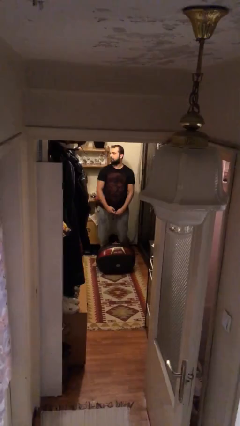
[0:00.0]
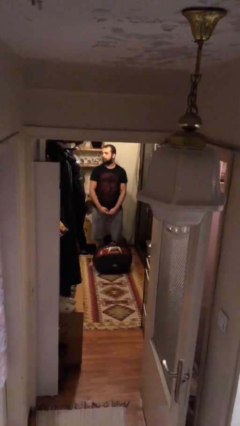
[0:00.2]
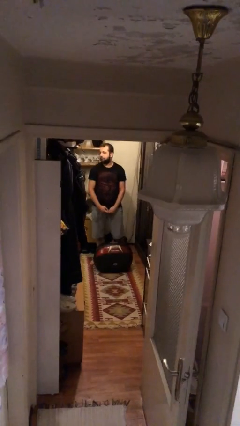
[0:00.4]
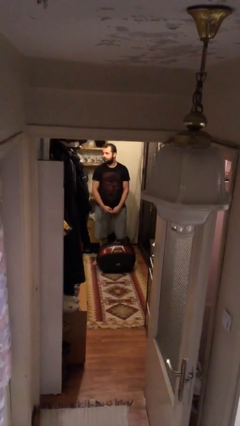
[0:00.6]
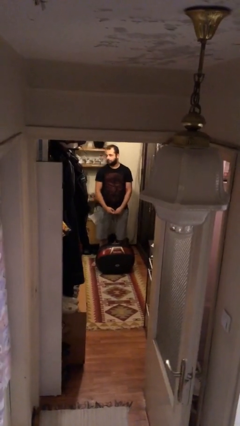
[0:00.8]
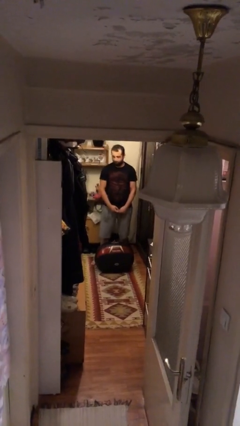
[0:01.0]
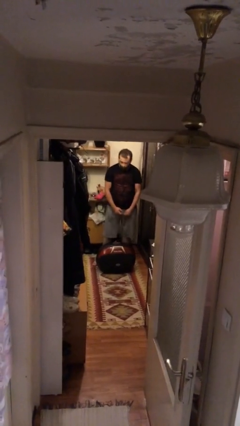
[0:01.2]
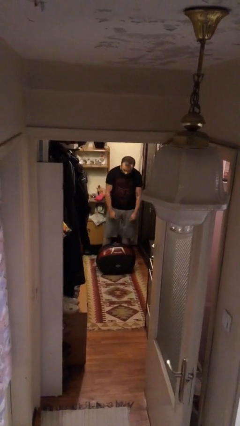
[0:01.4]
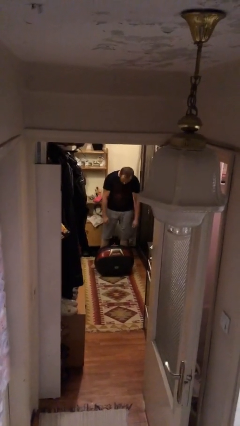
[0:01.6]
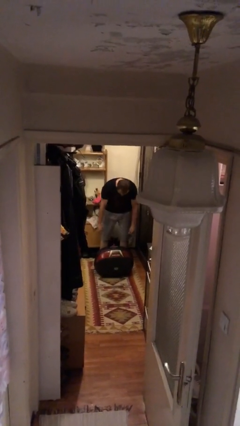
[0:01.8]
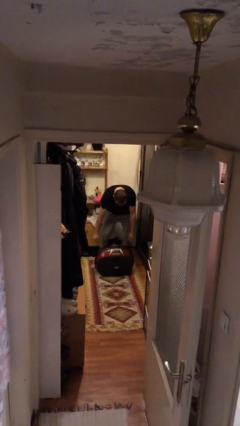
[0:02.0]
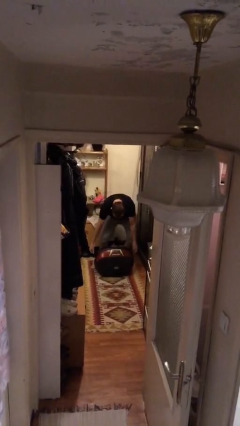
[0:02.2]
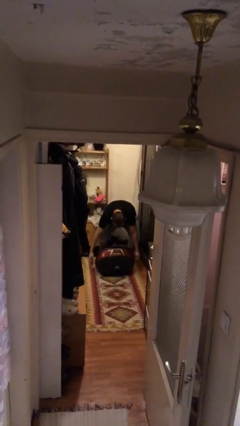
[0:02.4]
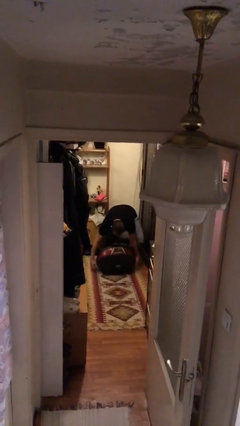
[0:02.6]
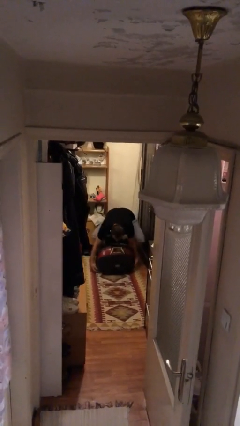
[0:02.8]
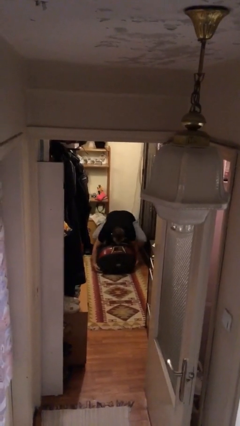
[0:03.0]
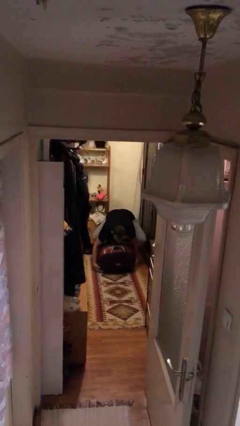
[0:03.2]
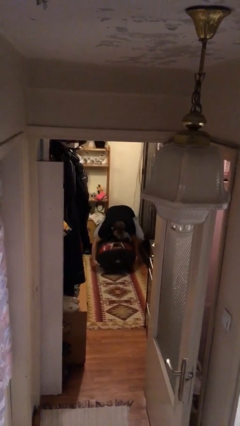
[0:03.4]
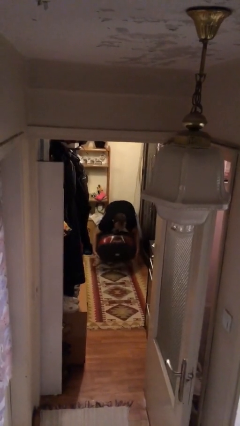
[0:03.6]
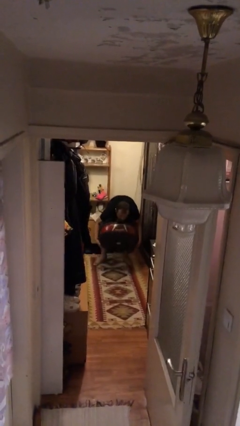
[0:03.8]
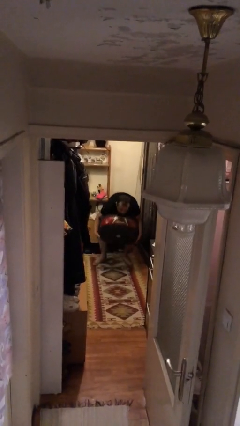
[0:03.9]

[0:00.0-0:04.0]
person picks up object from floor

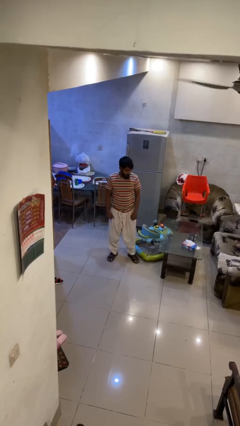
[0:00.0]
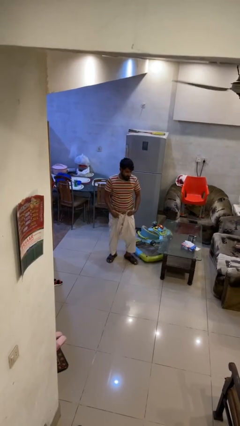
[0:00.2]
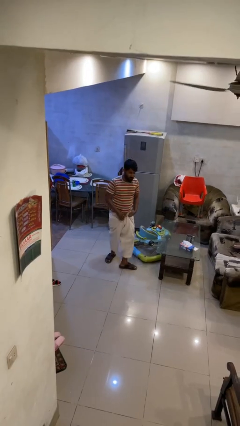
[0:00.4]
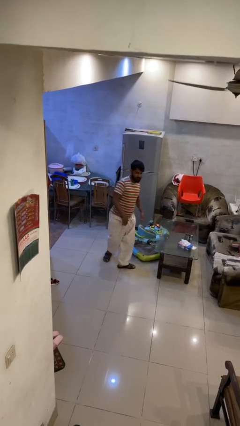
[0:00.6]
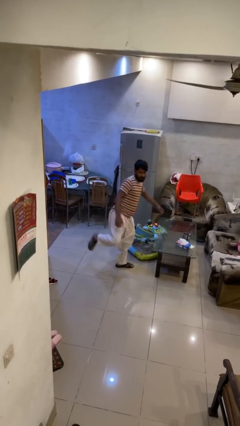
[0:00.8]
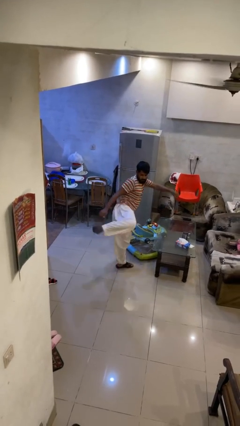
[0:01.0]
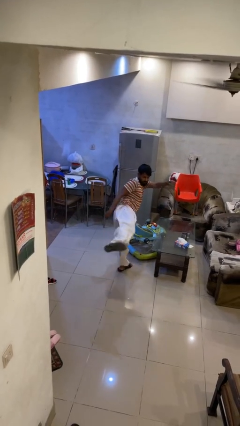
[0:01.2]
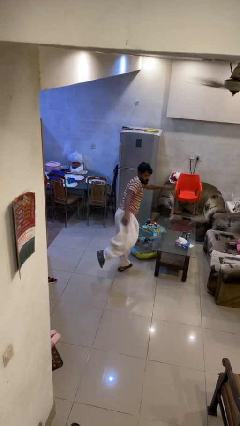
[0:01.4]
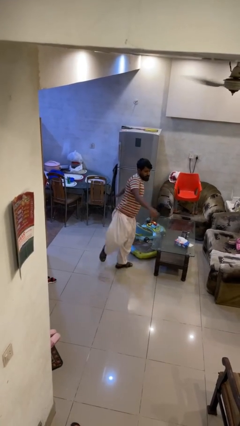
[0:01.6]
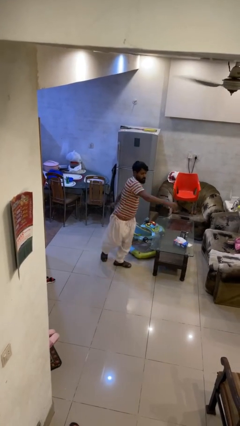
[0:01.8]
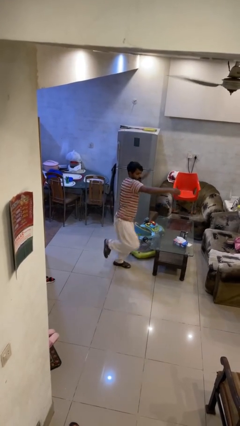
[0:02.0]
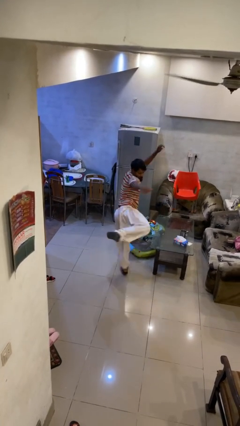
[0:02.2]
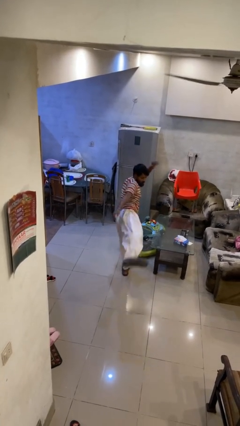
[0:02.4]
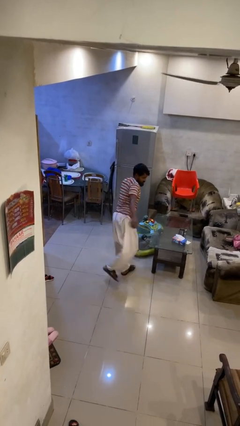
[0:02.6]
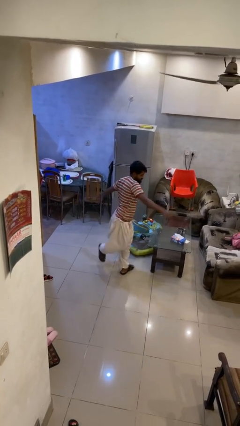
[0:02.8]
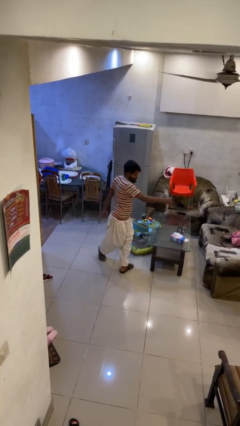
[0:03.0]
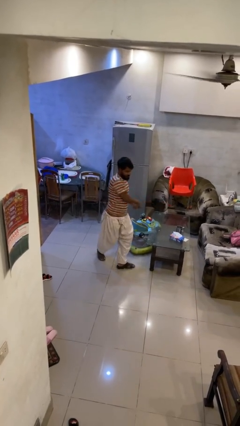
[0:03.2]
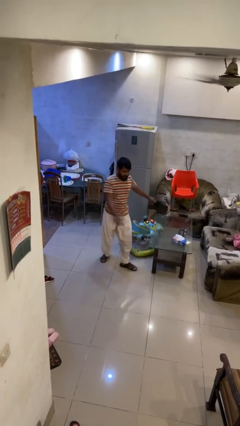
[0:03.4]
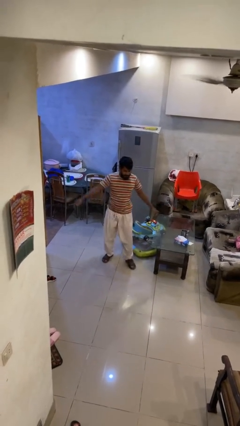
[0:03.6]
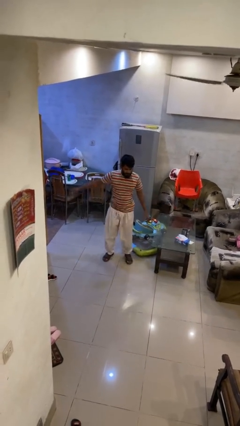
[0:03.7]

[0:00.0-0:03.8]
person karate kicks

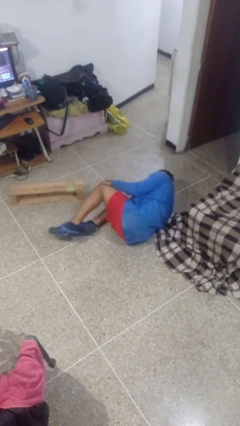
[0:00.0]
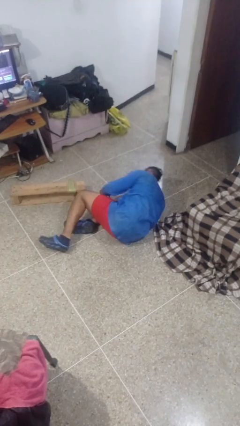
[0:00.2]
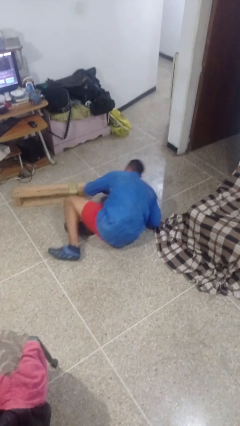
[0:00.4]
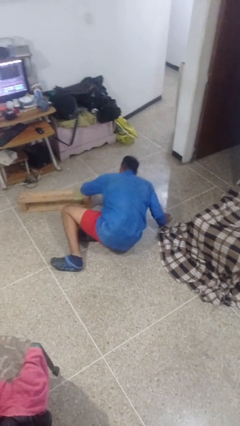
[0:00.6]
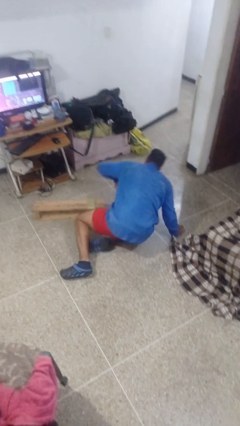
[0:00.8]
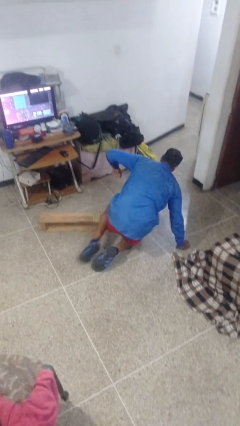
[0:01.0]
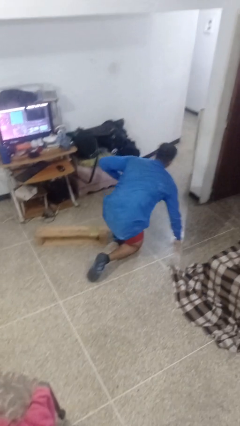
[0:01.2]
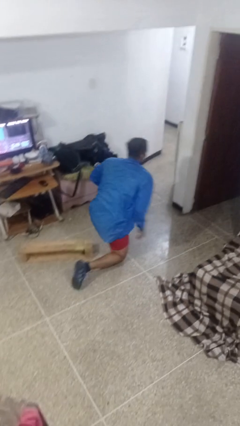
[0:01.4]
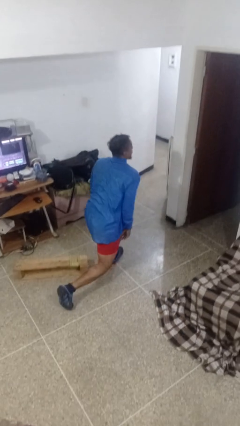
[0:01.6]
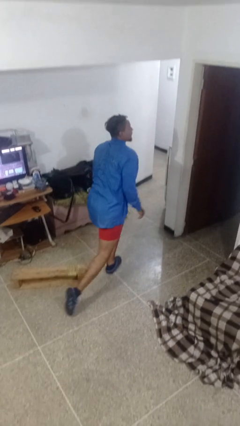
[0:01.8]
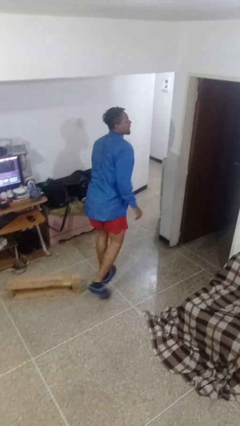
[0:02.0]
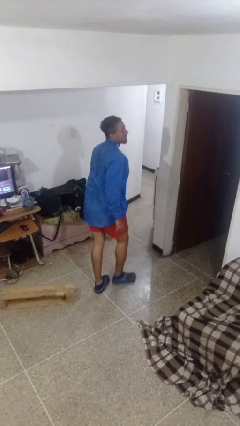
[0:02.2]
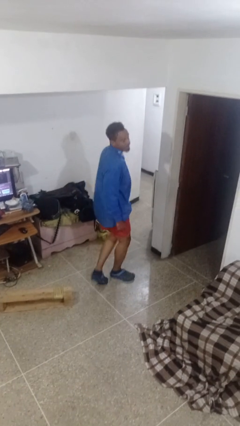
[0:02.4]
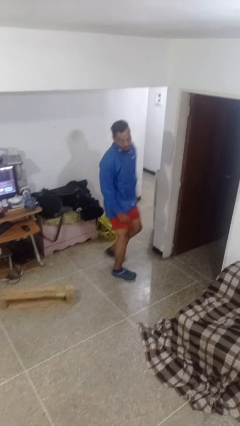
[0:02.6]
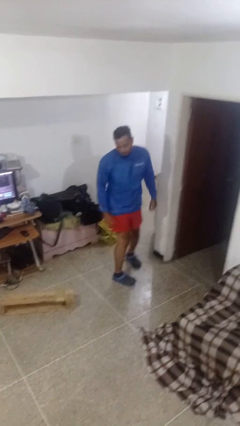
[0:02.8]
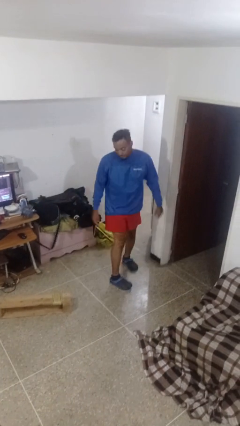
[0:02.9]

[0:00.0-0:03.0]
person stands up from floor

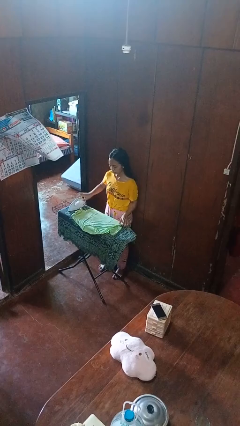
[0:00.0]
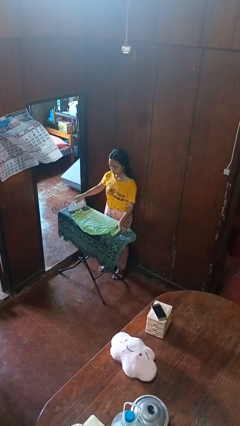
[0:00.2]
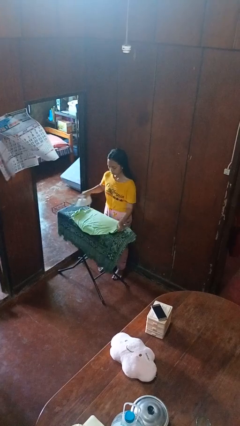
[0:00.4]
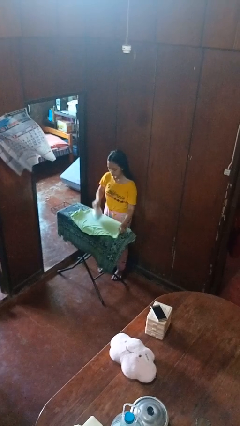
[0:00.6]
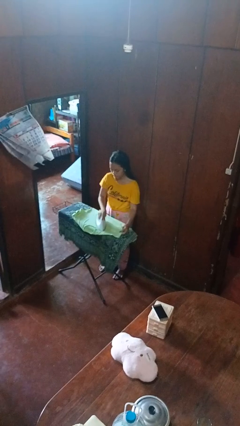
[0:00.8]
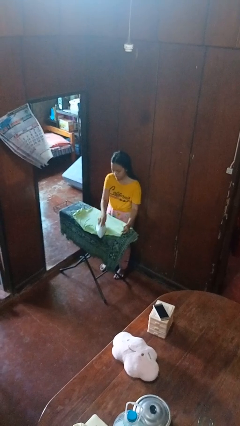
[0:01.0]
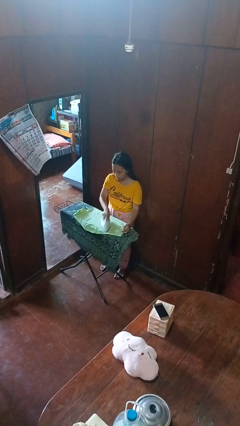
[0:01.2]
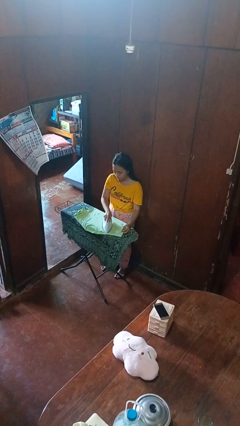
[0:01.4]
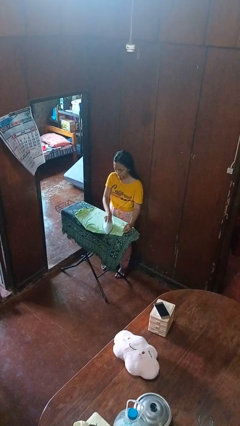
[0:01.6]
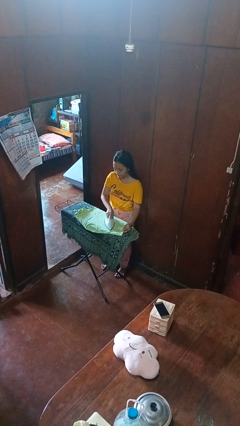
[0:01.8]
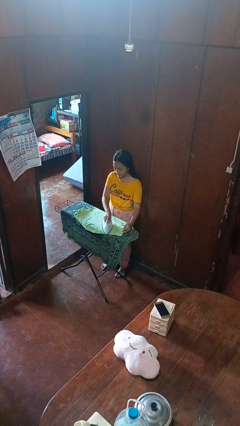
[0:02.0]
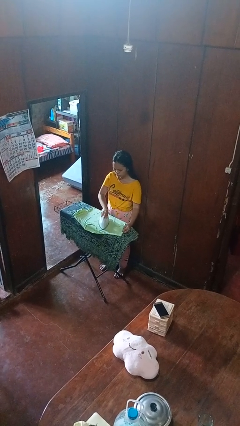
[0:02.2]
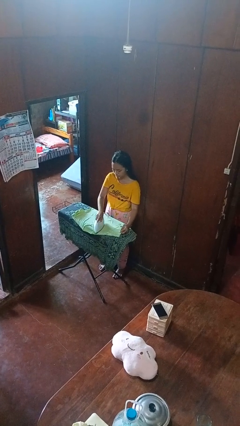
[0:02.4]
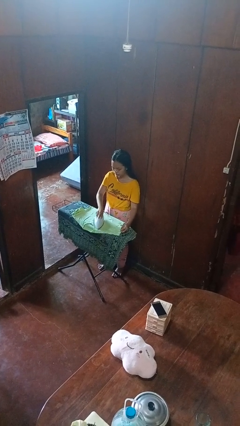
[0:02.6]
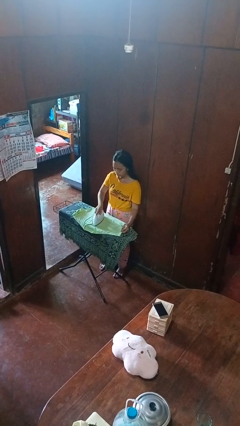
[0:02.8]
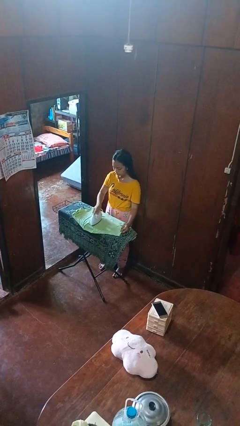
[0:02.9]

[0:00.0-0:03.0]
person irons clothes

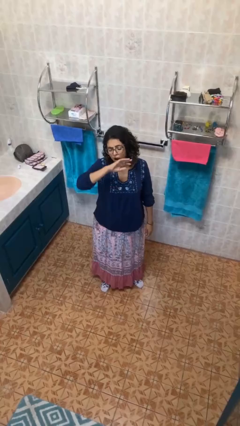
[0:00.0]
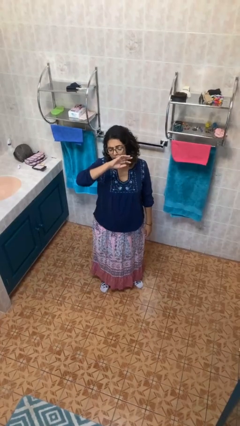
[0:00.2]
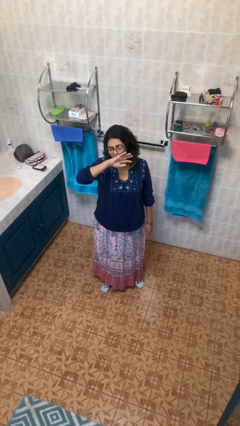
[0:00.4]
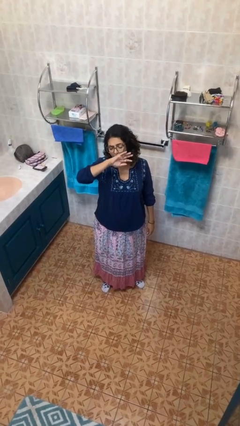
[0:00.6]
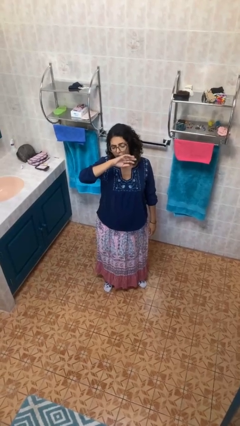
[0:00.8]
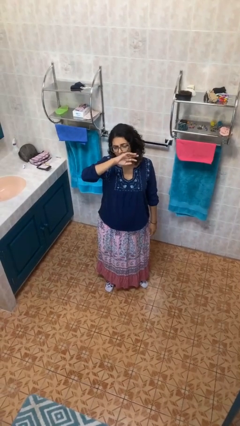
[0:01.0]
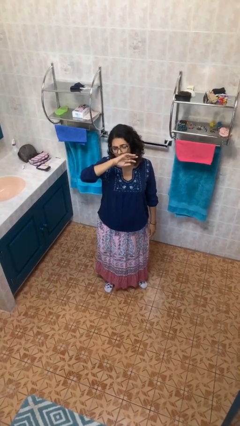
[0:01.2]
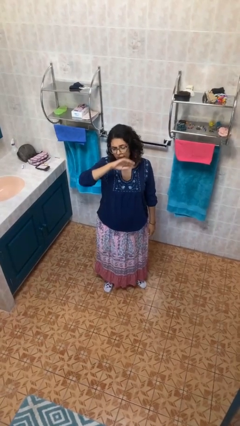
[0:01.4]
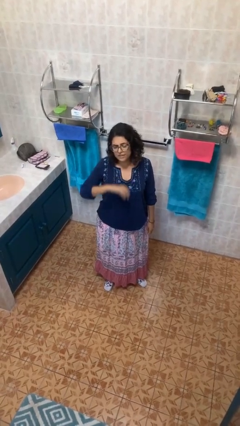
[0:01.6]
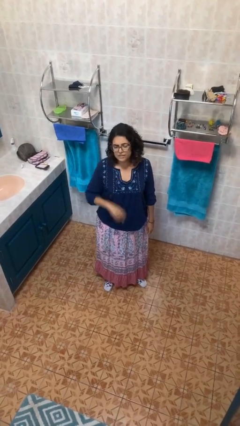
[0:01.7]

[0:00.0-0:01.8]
person yawns

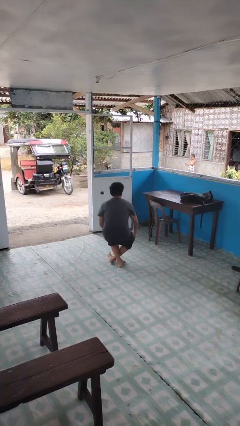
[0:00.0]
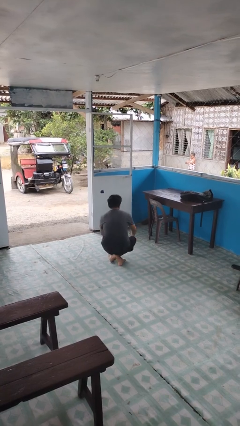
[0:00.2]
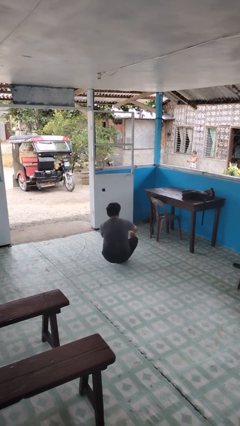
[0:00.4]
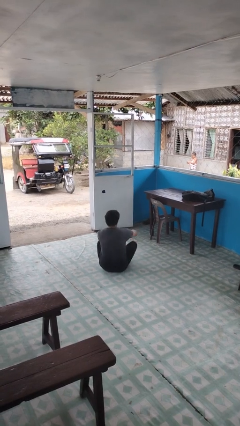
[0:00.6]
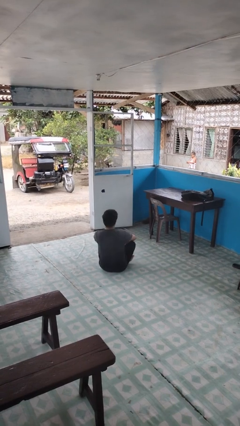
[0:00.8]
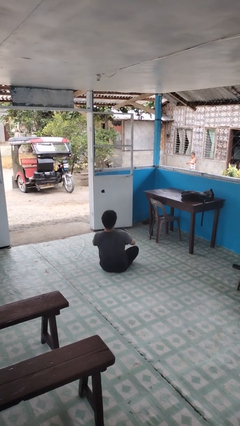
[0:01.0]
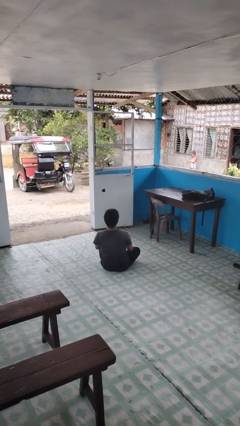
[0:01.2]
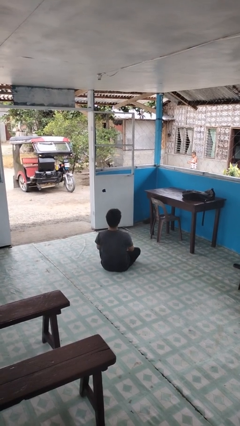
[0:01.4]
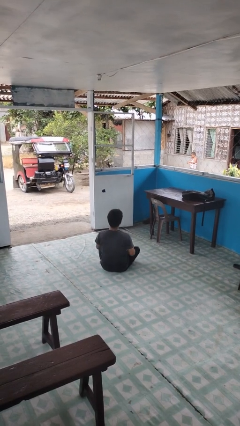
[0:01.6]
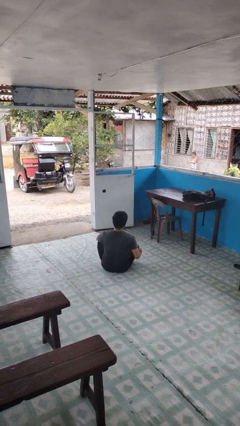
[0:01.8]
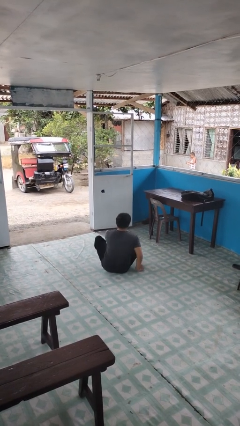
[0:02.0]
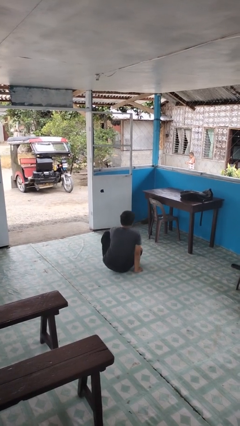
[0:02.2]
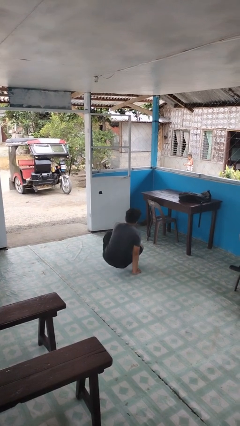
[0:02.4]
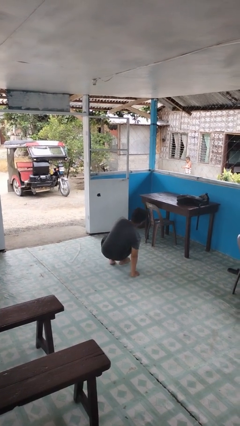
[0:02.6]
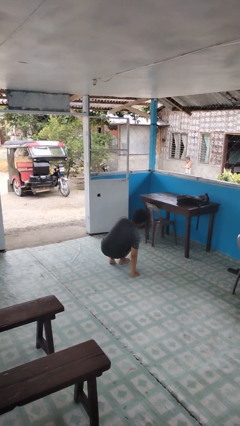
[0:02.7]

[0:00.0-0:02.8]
person sits crisscross
